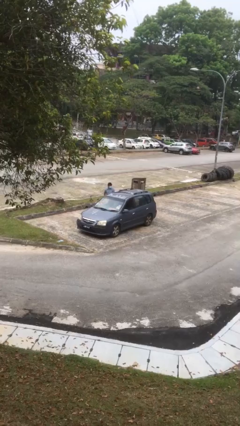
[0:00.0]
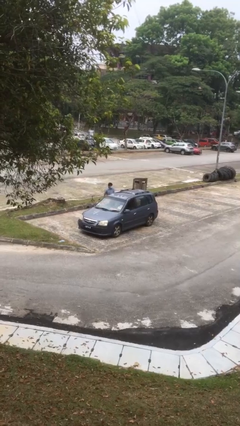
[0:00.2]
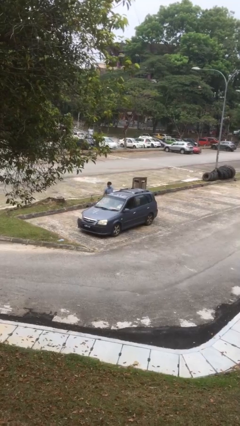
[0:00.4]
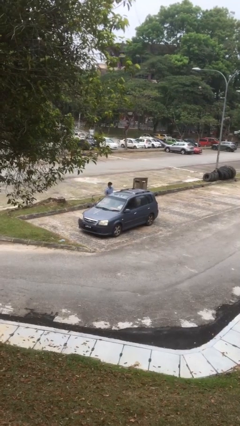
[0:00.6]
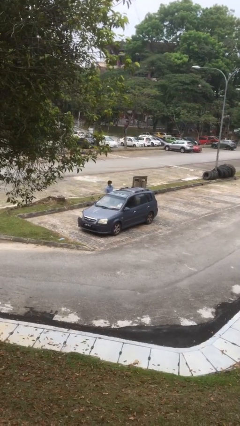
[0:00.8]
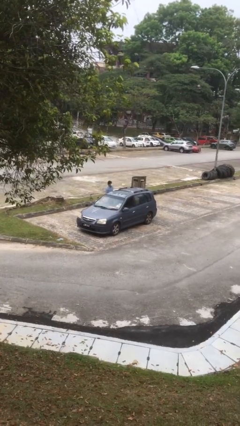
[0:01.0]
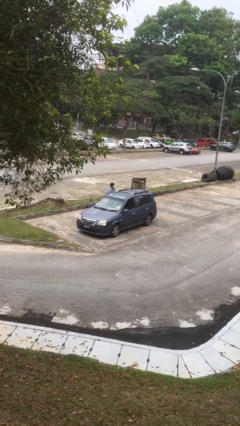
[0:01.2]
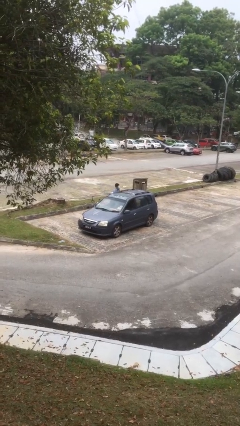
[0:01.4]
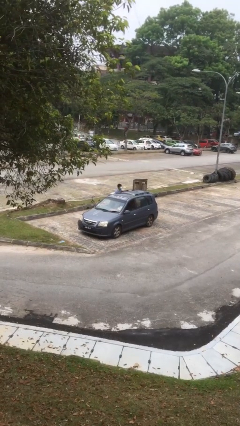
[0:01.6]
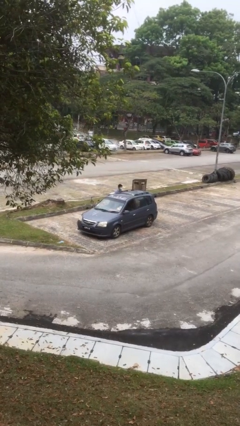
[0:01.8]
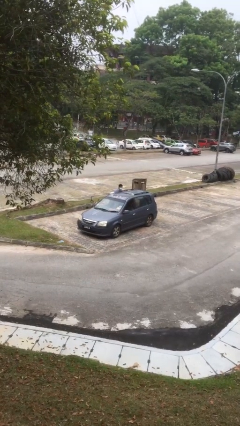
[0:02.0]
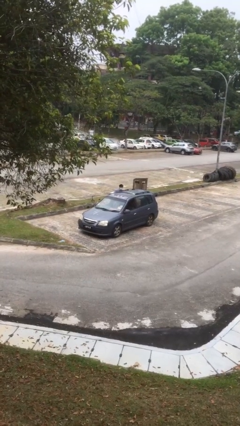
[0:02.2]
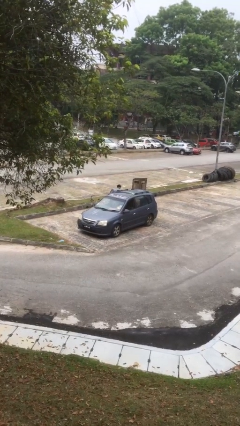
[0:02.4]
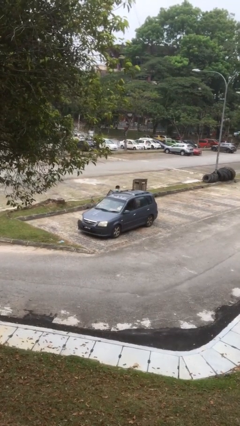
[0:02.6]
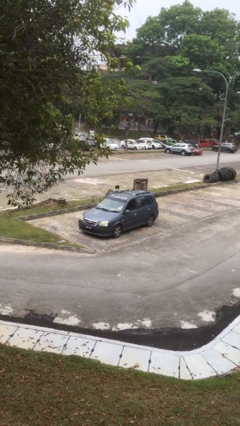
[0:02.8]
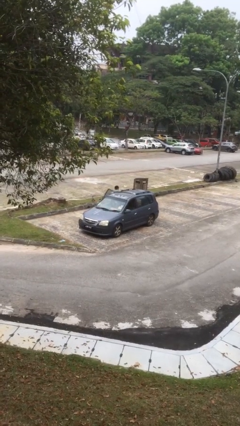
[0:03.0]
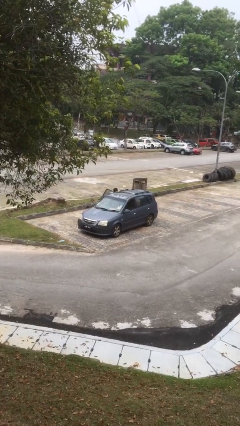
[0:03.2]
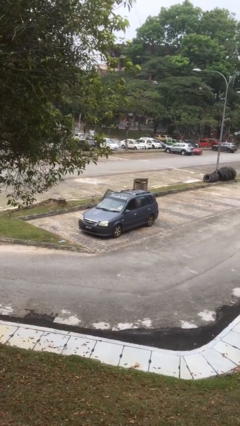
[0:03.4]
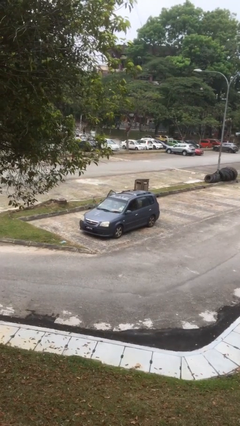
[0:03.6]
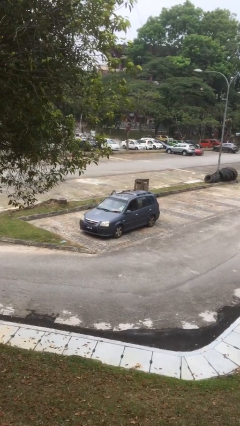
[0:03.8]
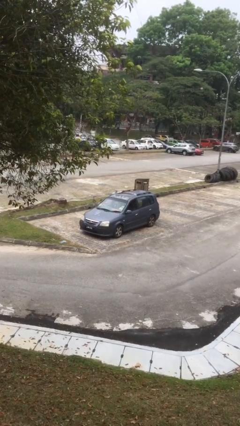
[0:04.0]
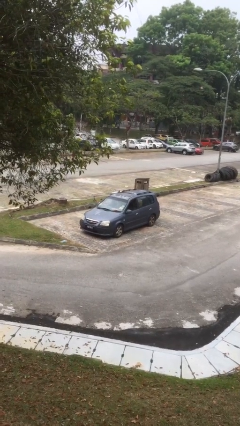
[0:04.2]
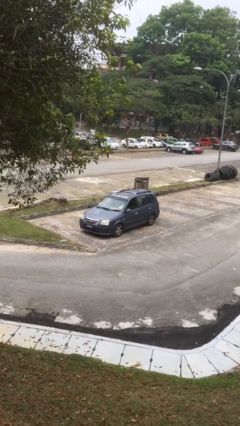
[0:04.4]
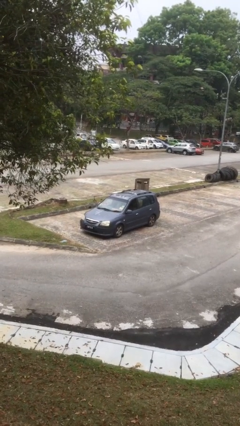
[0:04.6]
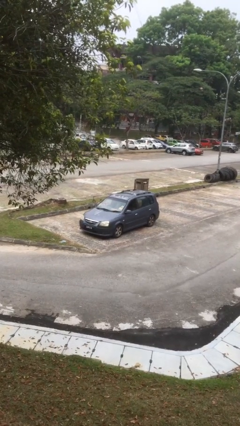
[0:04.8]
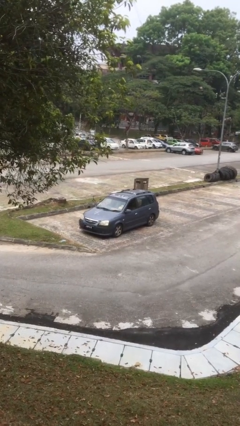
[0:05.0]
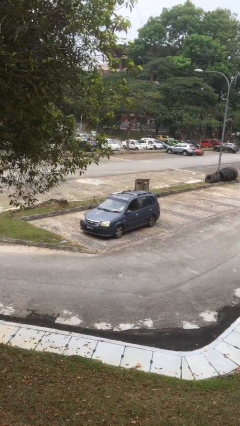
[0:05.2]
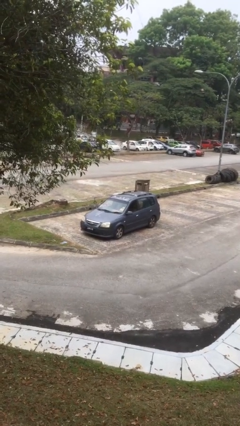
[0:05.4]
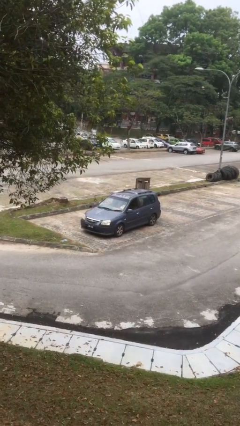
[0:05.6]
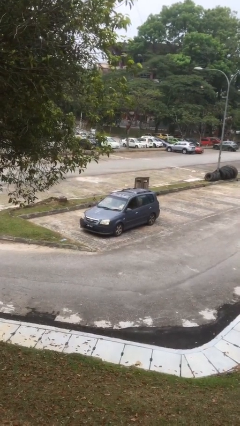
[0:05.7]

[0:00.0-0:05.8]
car picks up person

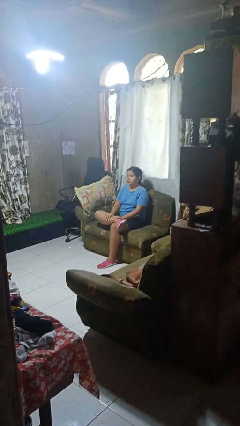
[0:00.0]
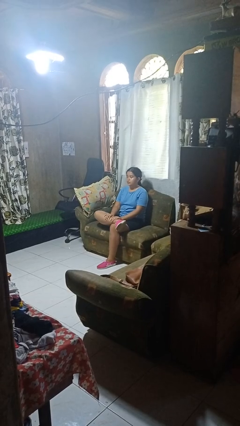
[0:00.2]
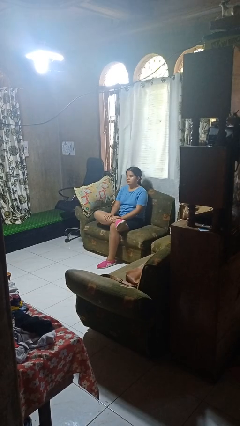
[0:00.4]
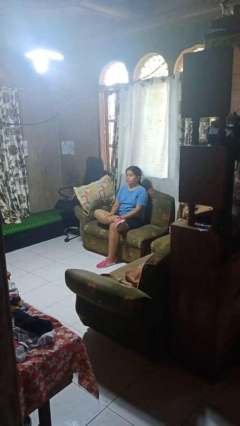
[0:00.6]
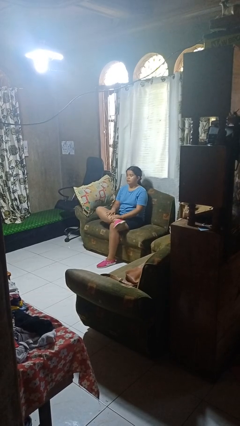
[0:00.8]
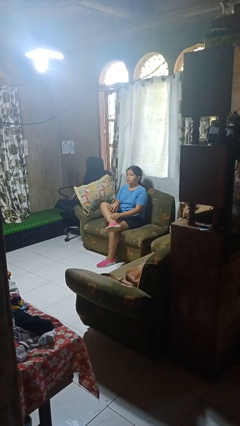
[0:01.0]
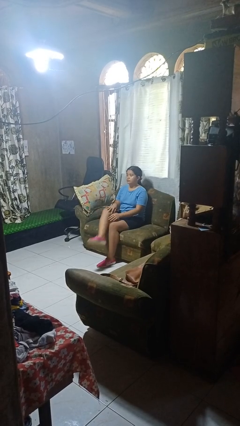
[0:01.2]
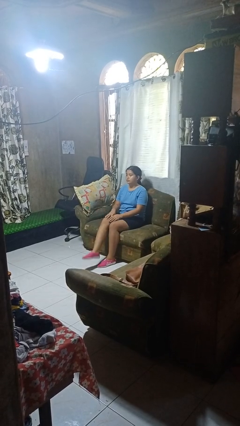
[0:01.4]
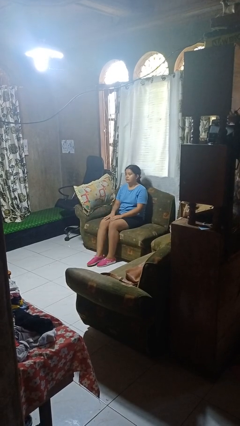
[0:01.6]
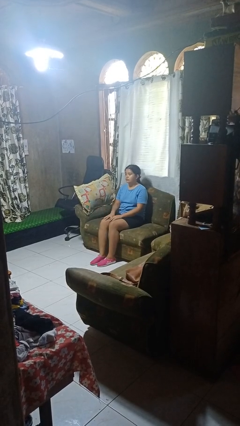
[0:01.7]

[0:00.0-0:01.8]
person crosses legs

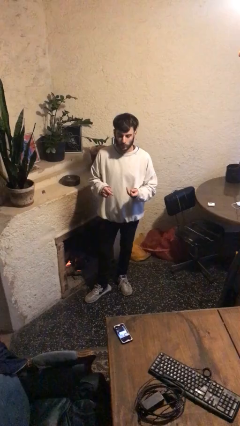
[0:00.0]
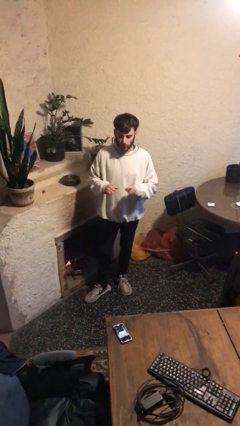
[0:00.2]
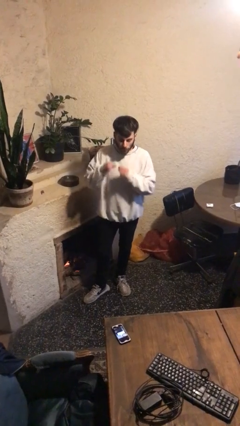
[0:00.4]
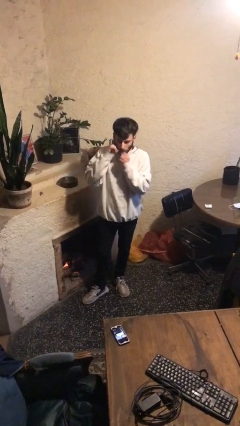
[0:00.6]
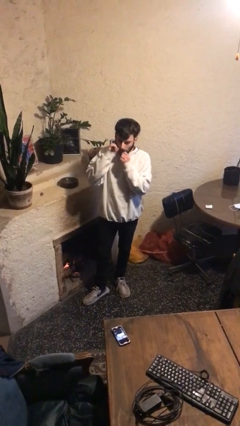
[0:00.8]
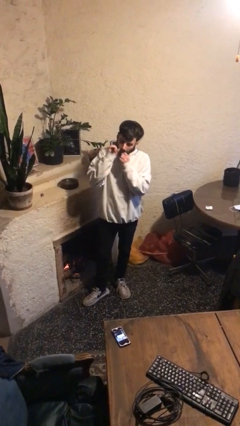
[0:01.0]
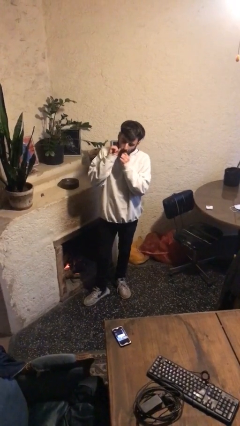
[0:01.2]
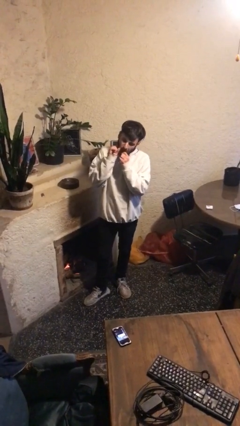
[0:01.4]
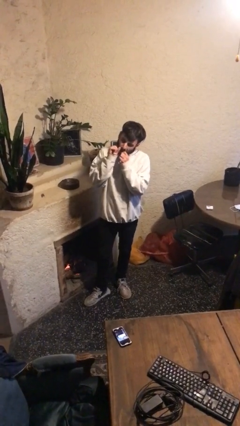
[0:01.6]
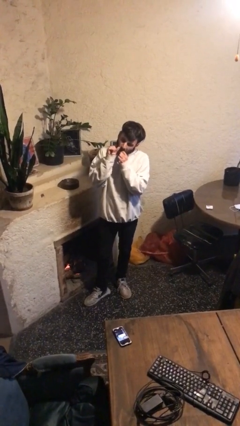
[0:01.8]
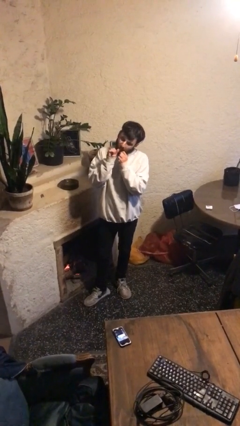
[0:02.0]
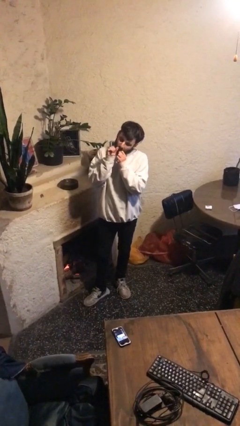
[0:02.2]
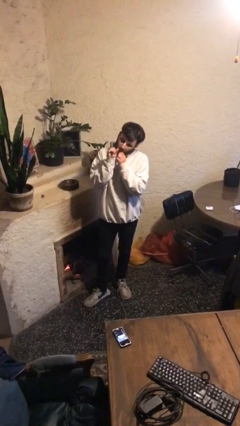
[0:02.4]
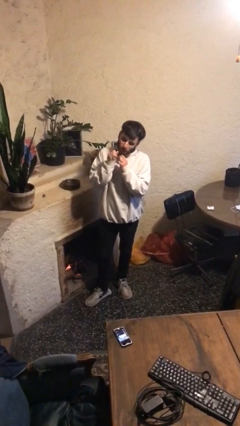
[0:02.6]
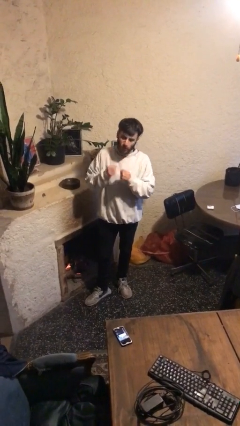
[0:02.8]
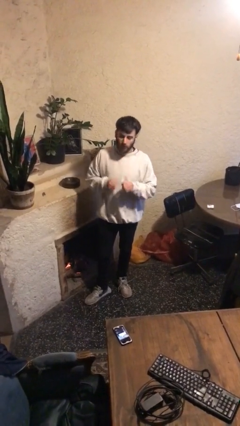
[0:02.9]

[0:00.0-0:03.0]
person flosses

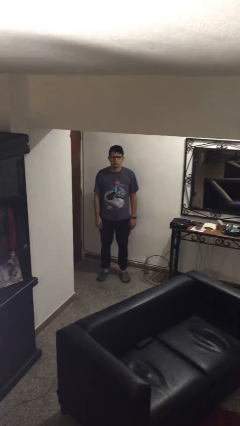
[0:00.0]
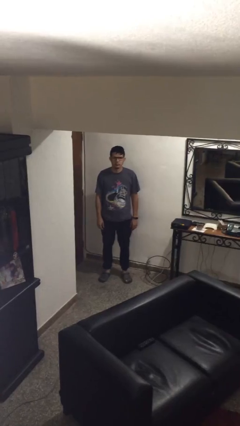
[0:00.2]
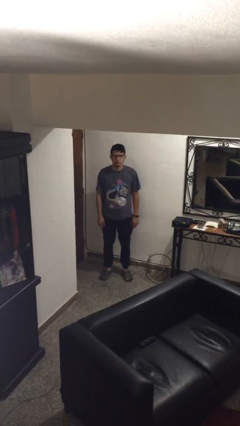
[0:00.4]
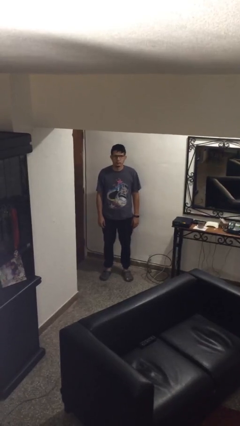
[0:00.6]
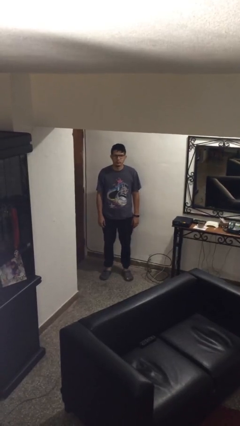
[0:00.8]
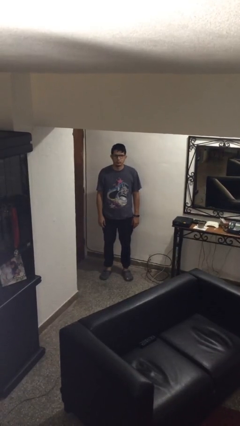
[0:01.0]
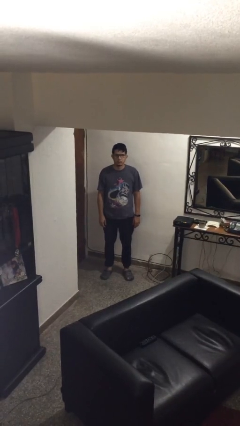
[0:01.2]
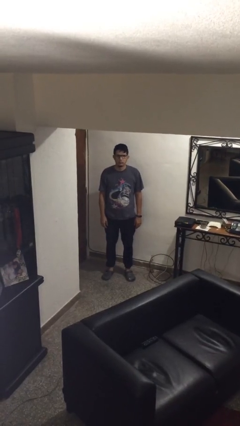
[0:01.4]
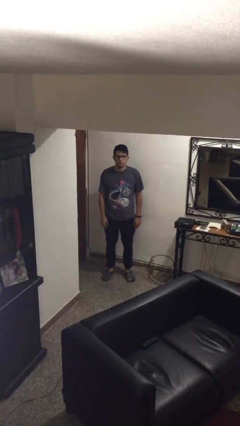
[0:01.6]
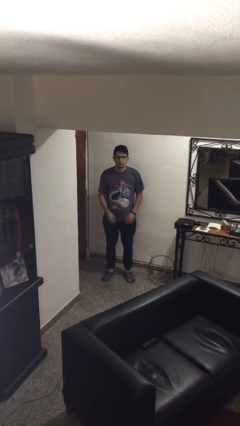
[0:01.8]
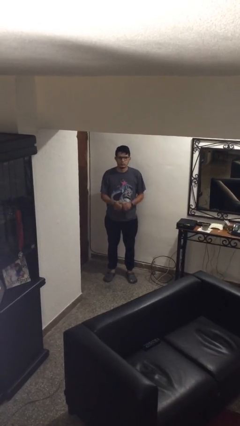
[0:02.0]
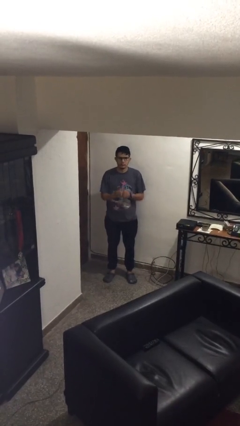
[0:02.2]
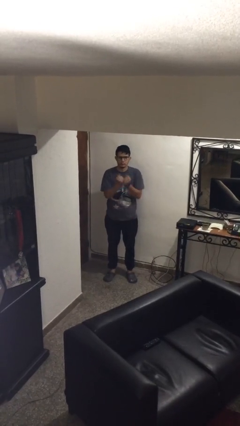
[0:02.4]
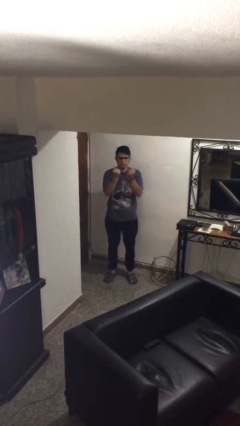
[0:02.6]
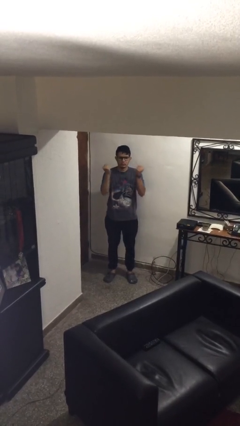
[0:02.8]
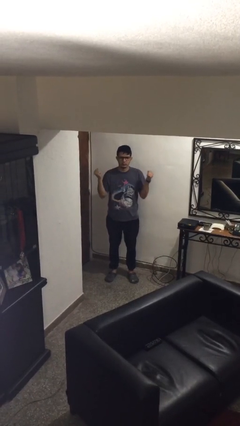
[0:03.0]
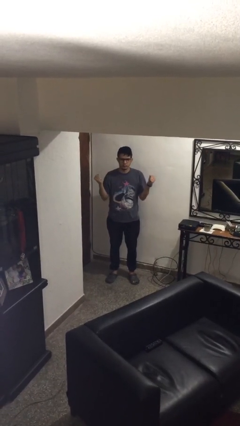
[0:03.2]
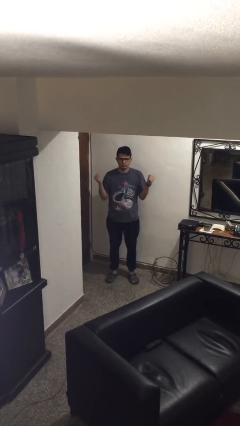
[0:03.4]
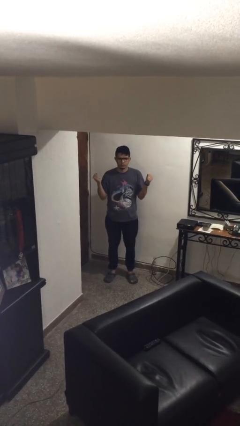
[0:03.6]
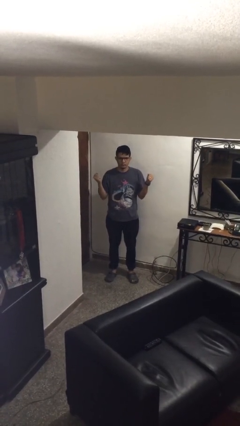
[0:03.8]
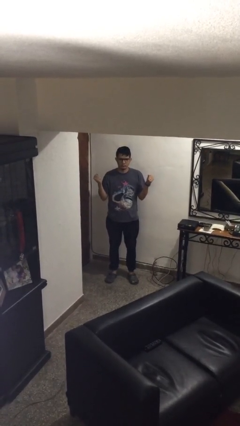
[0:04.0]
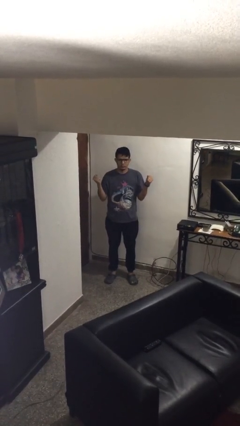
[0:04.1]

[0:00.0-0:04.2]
person gestures zoom in

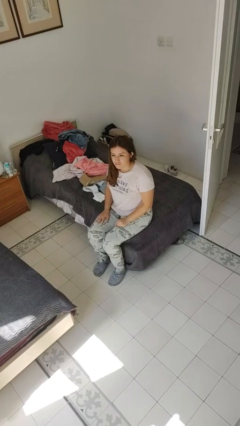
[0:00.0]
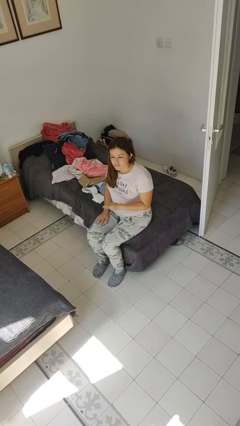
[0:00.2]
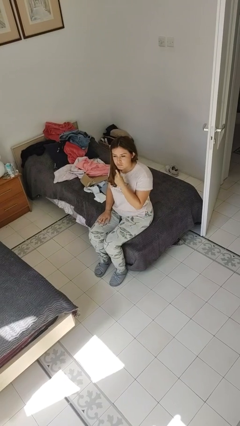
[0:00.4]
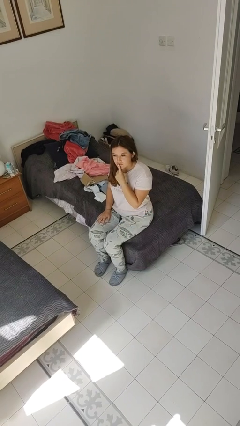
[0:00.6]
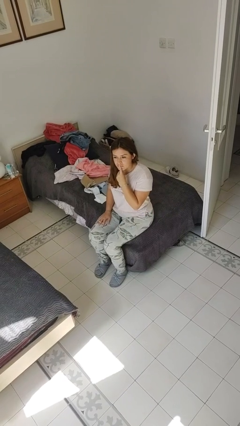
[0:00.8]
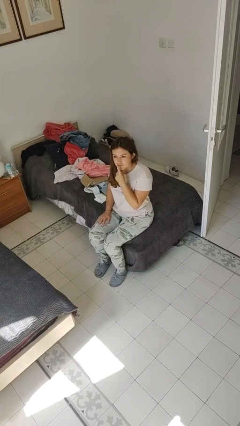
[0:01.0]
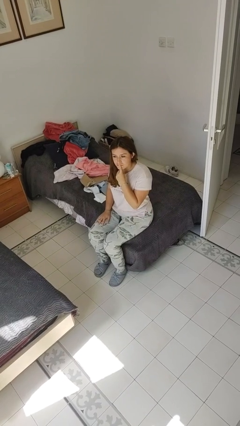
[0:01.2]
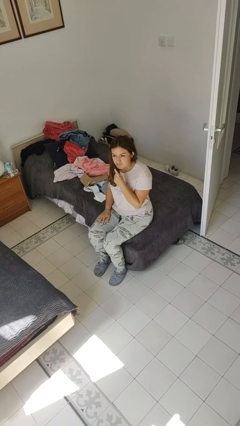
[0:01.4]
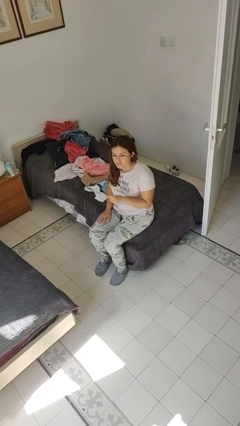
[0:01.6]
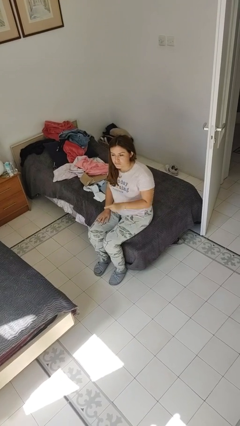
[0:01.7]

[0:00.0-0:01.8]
person gestures be quiet

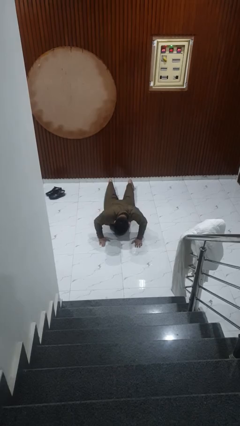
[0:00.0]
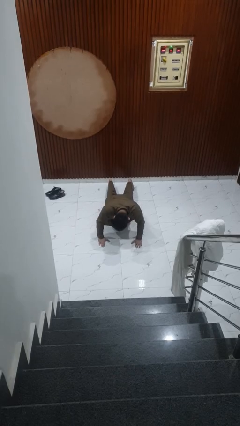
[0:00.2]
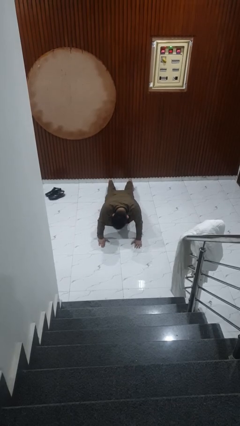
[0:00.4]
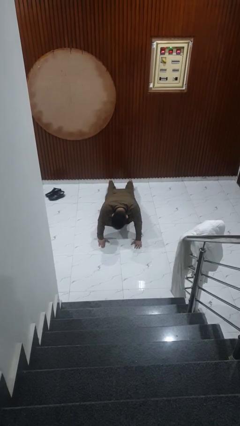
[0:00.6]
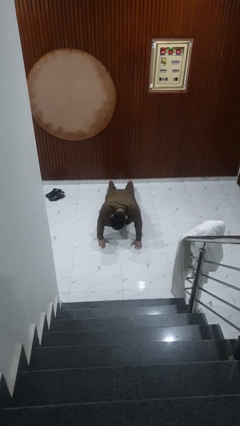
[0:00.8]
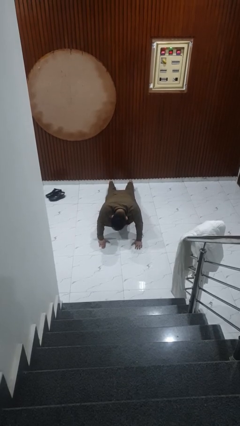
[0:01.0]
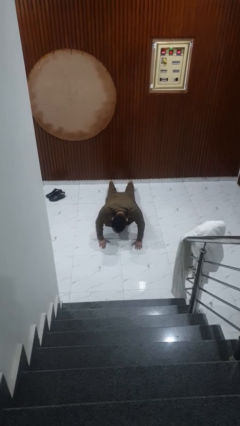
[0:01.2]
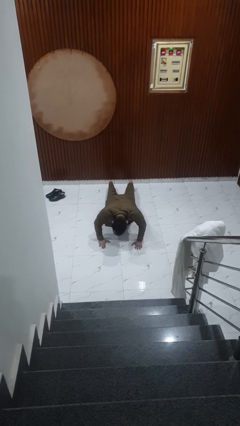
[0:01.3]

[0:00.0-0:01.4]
person exercises with pushup
